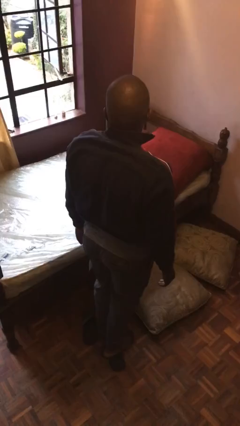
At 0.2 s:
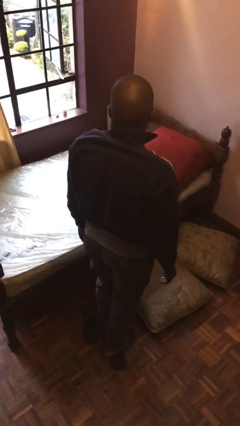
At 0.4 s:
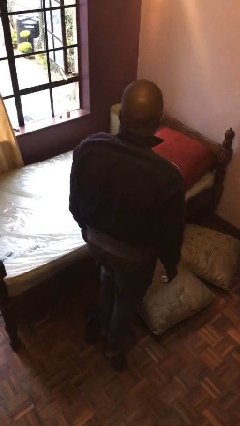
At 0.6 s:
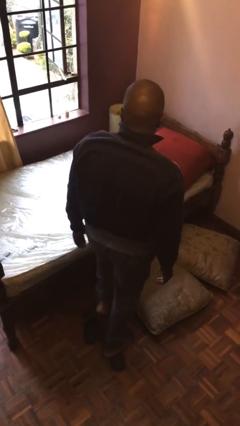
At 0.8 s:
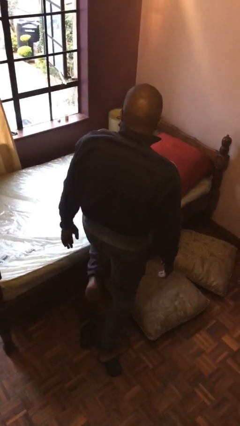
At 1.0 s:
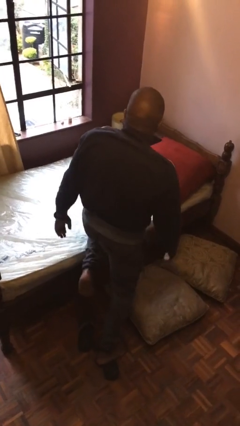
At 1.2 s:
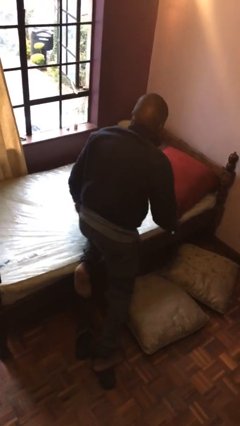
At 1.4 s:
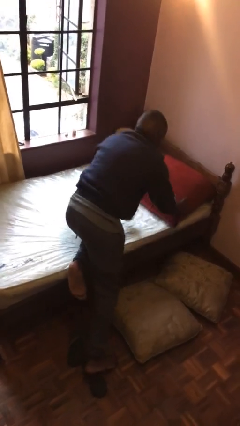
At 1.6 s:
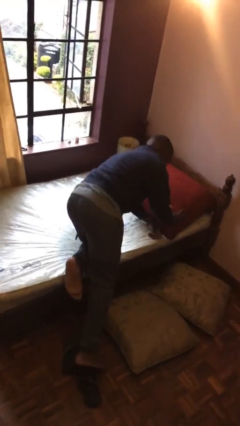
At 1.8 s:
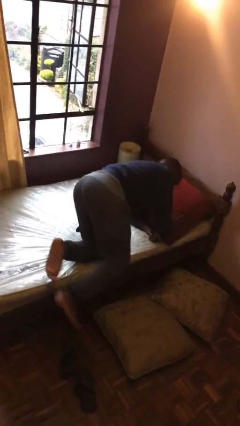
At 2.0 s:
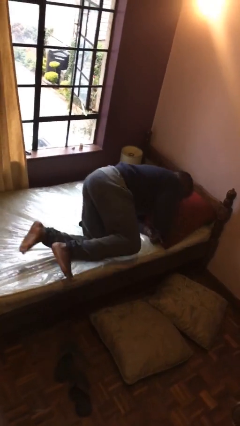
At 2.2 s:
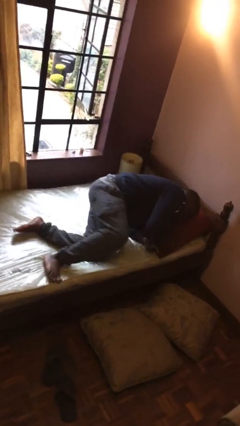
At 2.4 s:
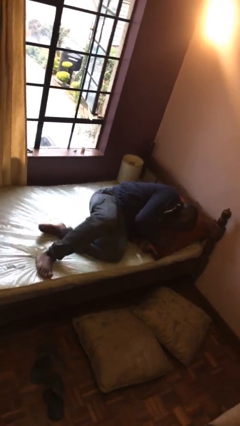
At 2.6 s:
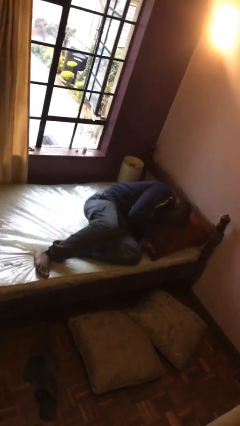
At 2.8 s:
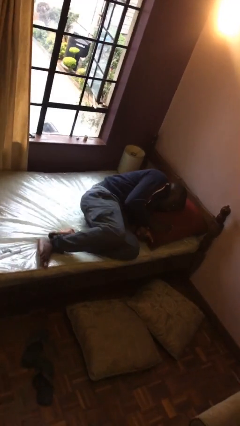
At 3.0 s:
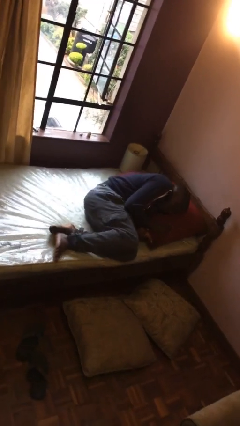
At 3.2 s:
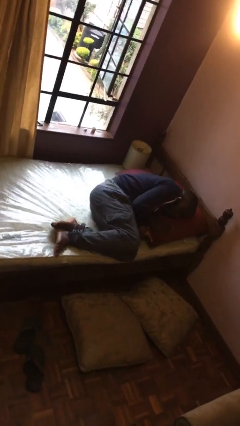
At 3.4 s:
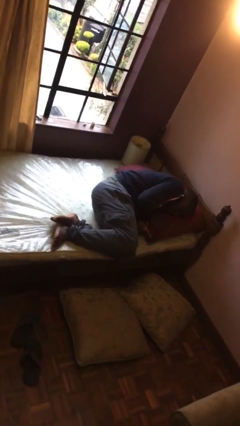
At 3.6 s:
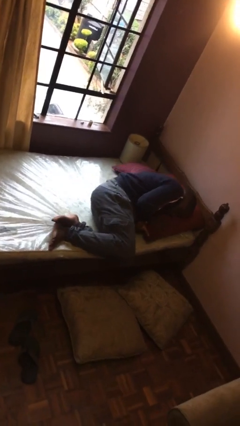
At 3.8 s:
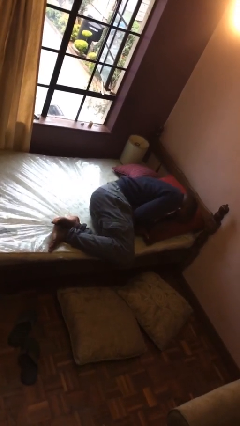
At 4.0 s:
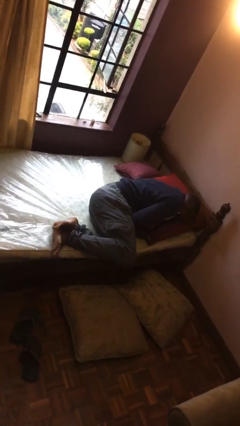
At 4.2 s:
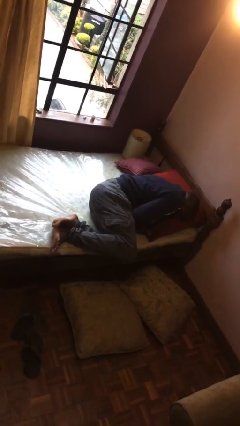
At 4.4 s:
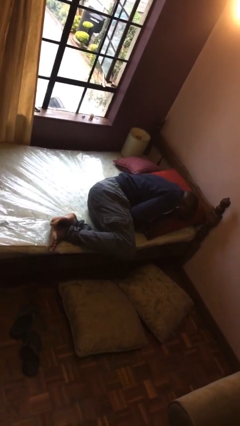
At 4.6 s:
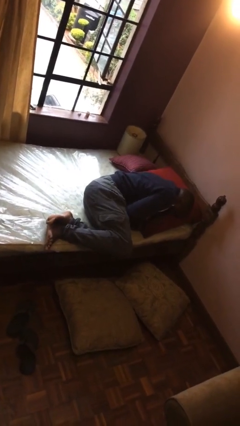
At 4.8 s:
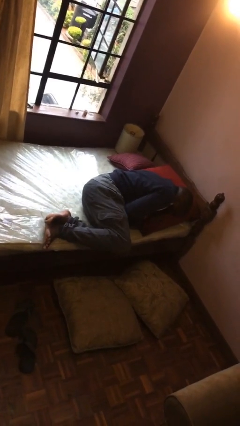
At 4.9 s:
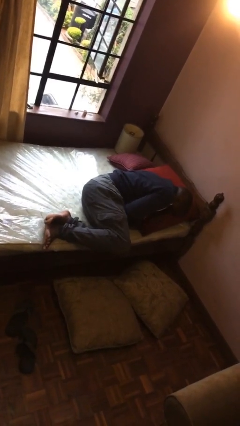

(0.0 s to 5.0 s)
person lies down on bed

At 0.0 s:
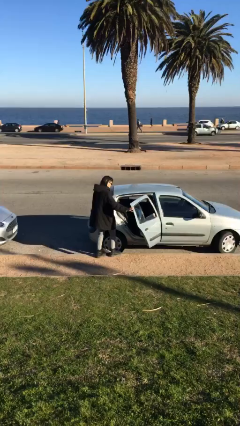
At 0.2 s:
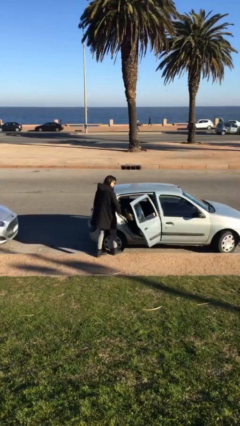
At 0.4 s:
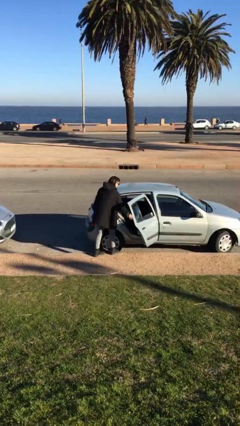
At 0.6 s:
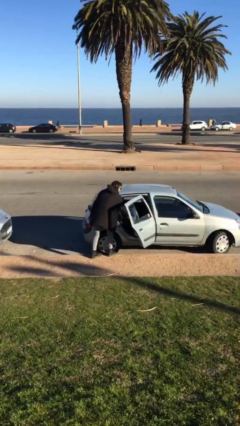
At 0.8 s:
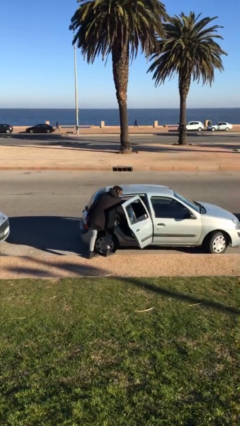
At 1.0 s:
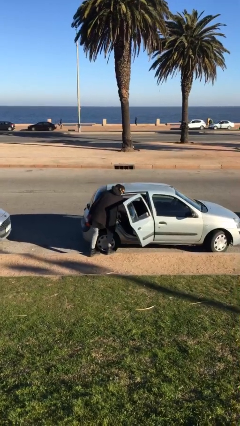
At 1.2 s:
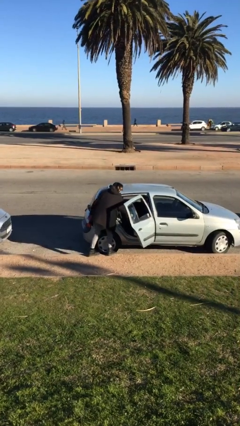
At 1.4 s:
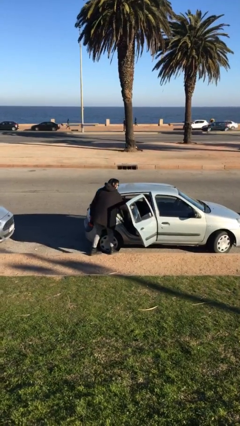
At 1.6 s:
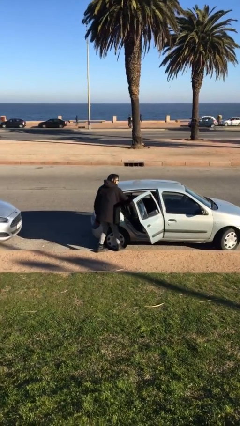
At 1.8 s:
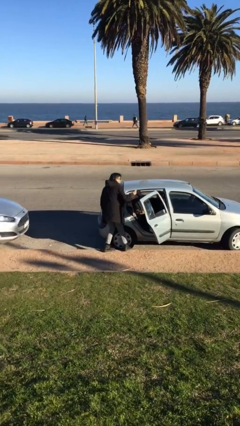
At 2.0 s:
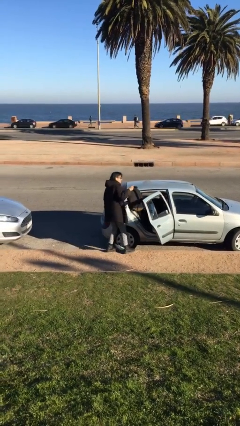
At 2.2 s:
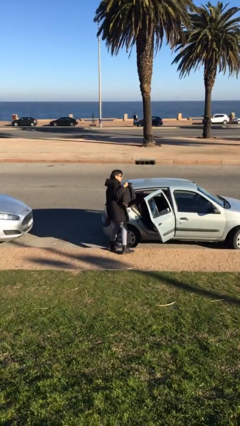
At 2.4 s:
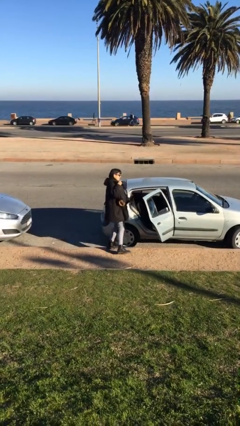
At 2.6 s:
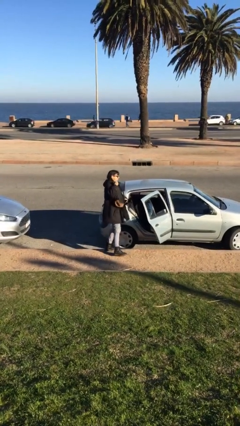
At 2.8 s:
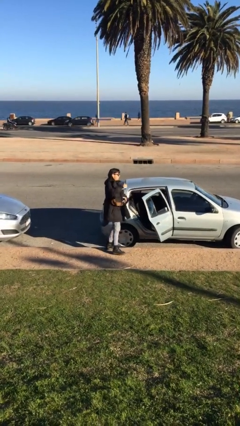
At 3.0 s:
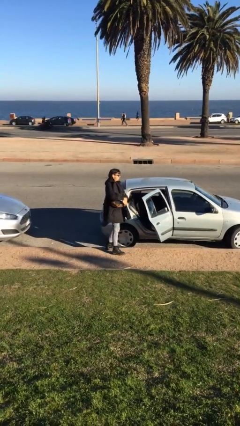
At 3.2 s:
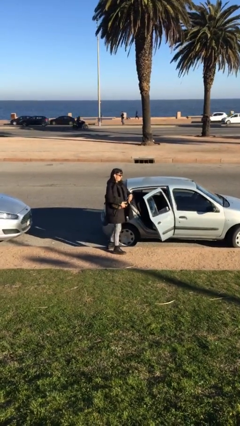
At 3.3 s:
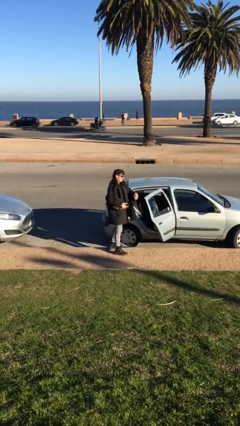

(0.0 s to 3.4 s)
person unloads car

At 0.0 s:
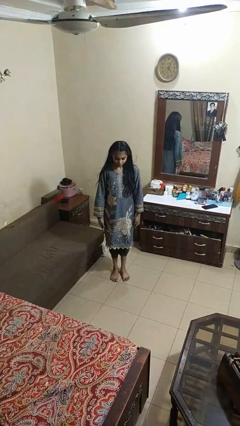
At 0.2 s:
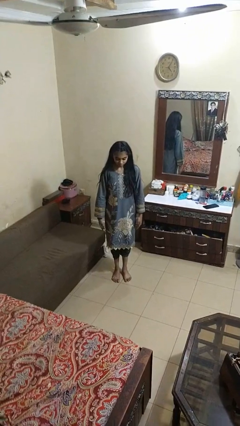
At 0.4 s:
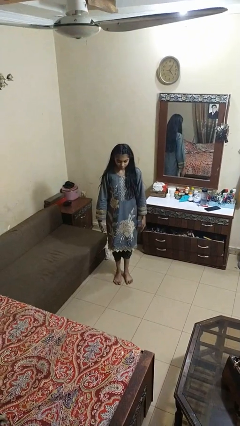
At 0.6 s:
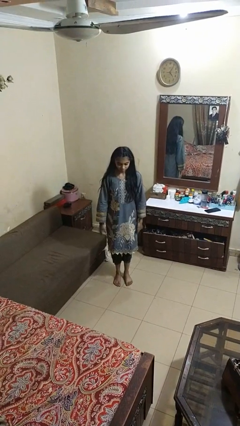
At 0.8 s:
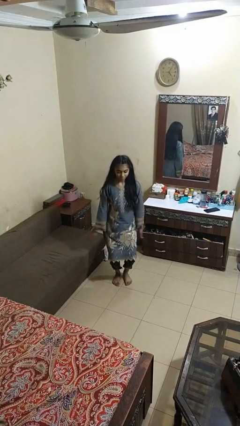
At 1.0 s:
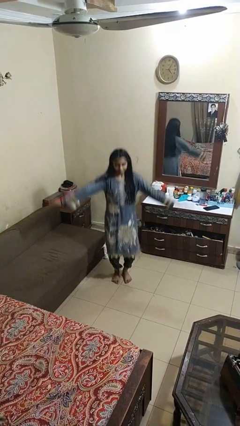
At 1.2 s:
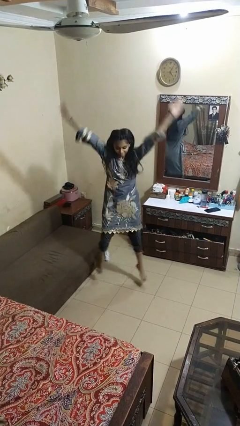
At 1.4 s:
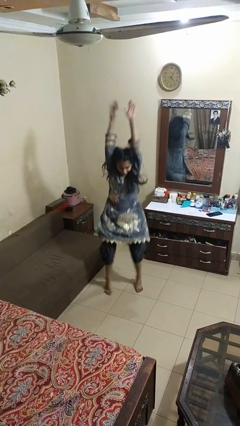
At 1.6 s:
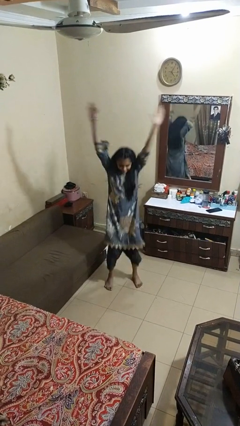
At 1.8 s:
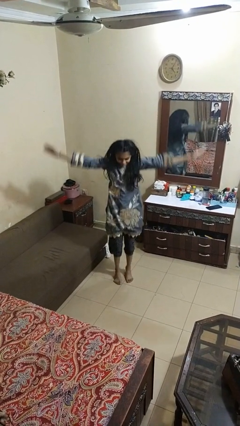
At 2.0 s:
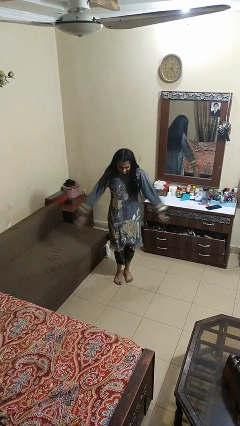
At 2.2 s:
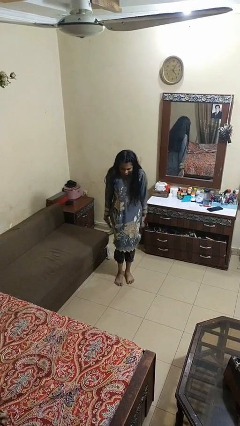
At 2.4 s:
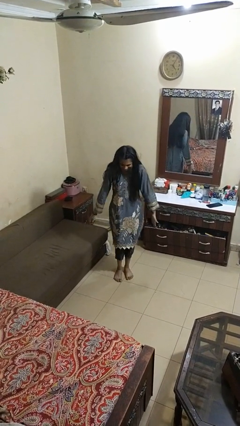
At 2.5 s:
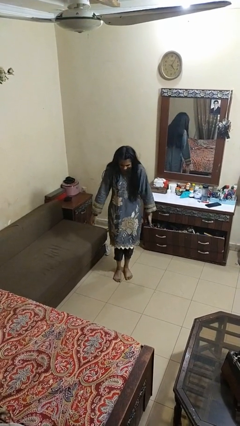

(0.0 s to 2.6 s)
person exercises with jumping jacks

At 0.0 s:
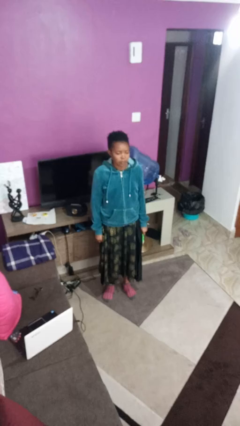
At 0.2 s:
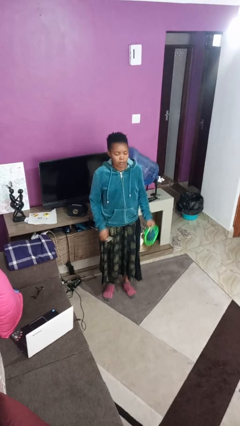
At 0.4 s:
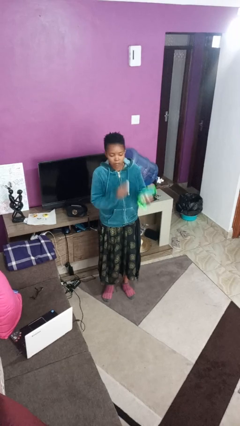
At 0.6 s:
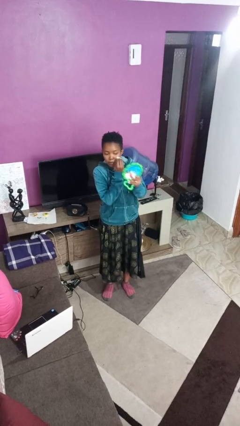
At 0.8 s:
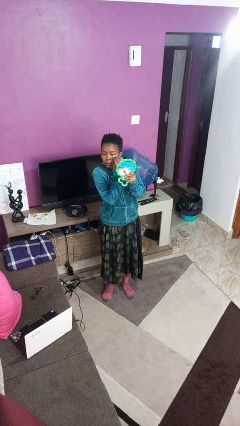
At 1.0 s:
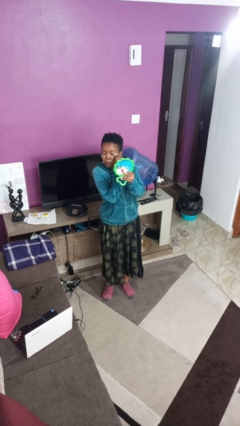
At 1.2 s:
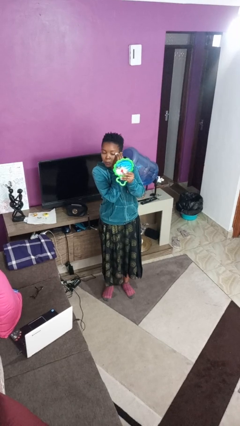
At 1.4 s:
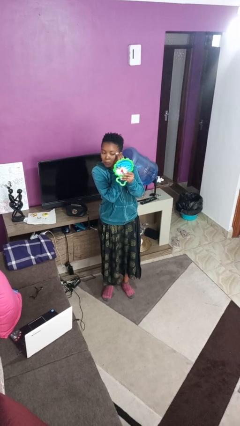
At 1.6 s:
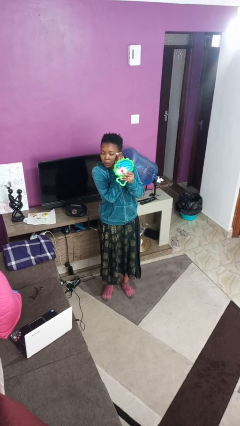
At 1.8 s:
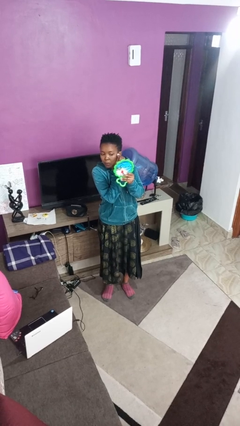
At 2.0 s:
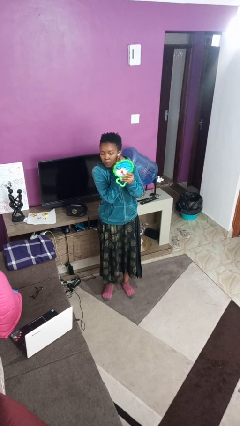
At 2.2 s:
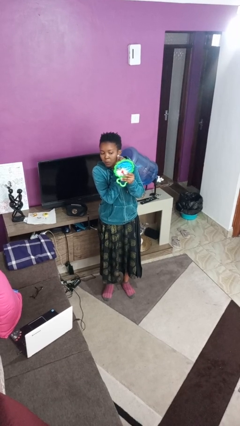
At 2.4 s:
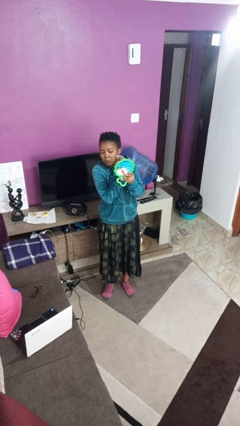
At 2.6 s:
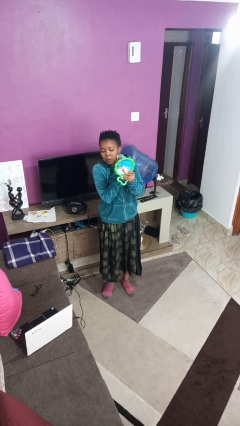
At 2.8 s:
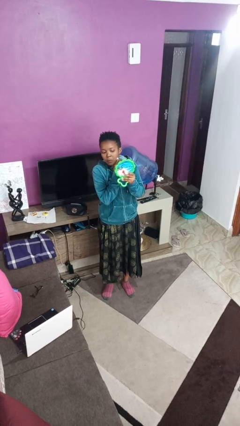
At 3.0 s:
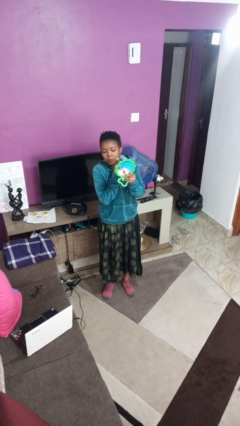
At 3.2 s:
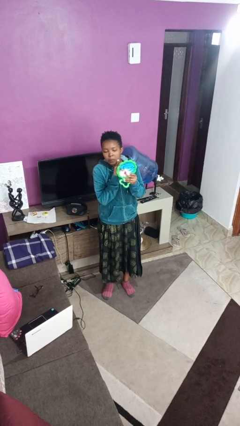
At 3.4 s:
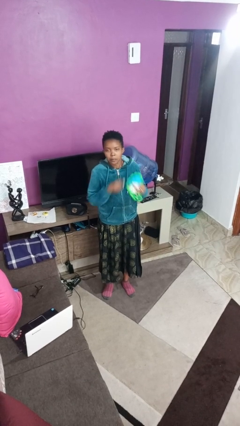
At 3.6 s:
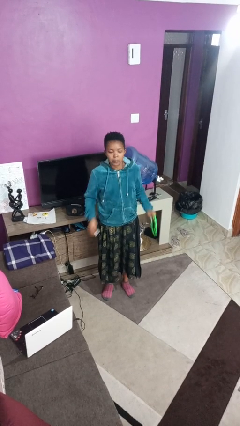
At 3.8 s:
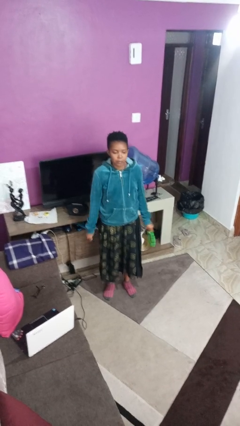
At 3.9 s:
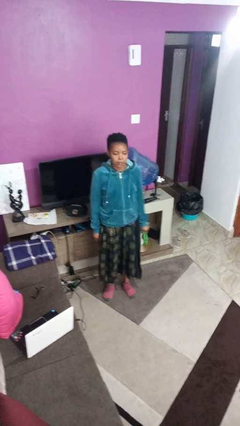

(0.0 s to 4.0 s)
person applies foundation makeup

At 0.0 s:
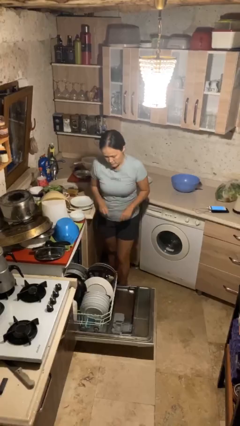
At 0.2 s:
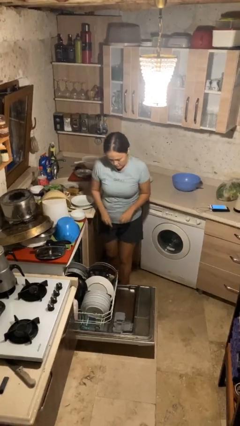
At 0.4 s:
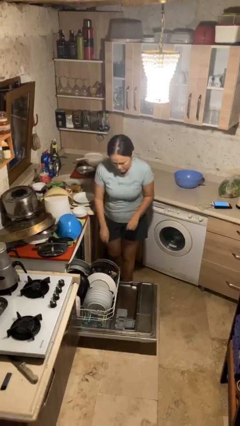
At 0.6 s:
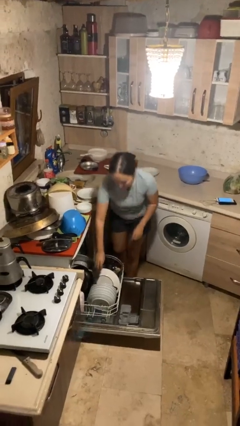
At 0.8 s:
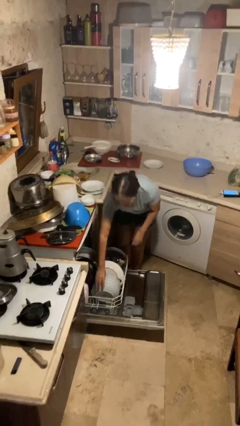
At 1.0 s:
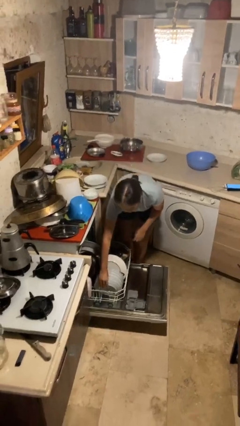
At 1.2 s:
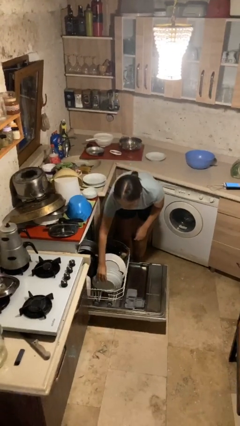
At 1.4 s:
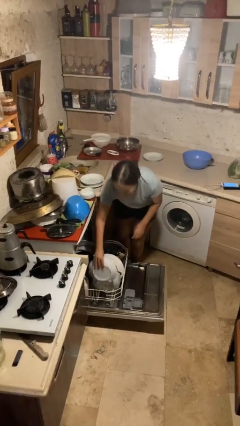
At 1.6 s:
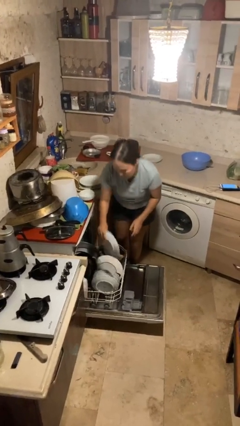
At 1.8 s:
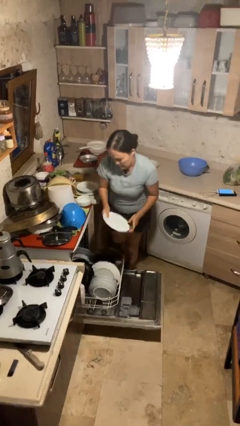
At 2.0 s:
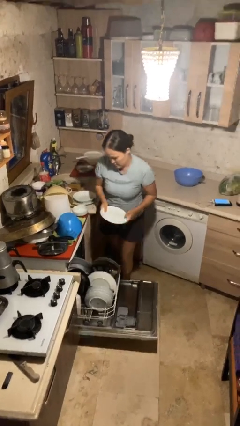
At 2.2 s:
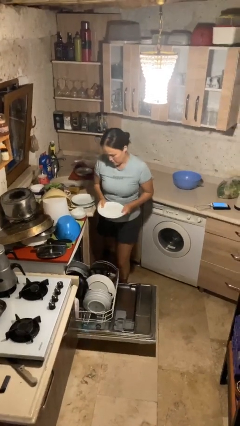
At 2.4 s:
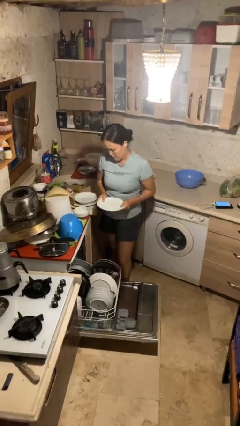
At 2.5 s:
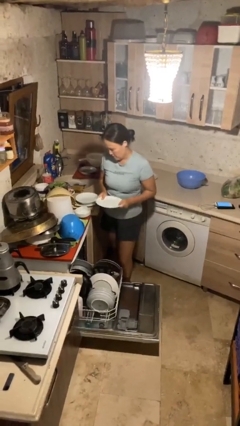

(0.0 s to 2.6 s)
person unloads dishwasher
